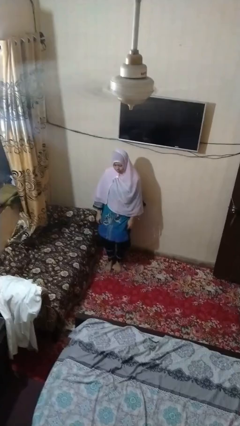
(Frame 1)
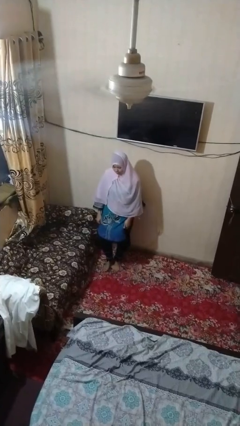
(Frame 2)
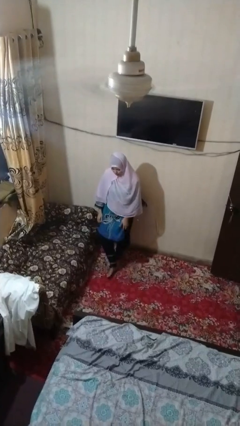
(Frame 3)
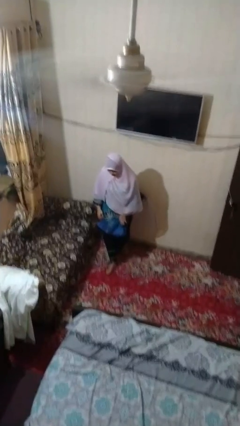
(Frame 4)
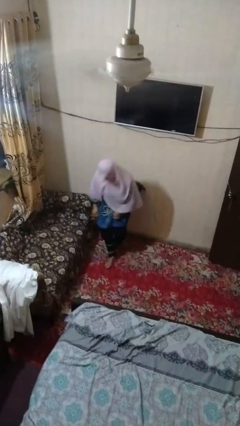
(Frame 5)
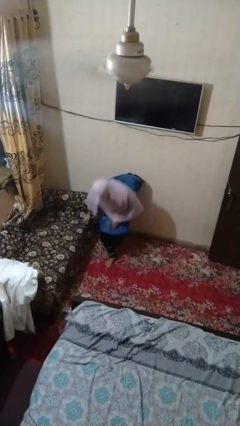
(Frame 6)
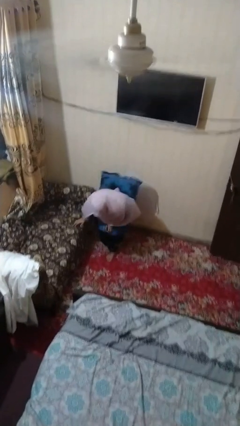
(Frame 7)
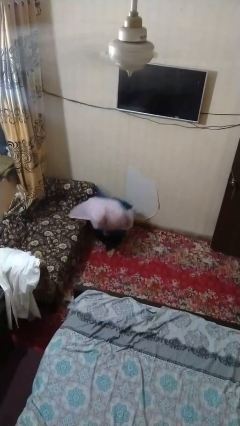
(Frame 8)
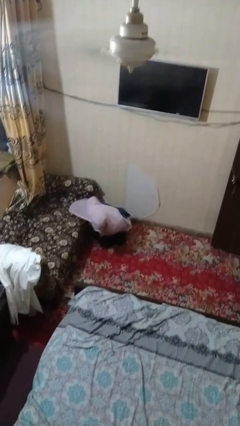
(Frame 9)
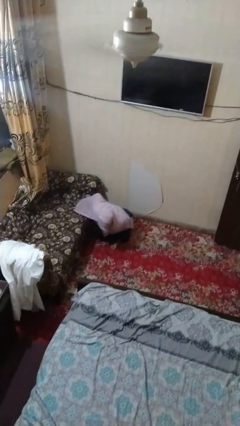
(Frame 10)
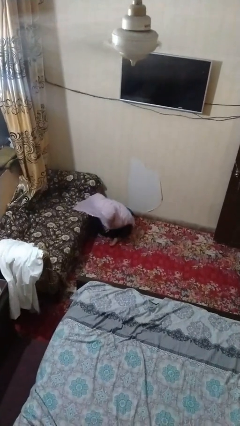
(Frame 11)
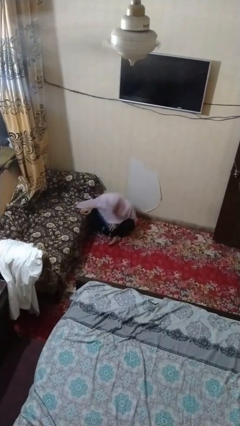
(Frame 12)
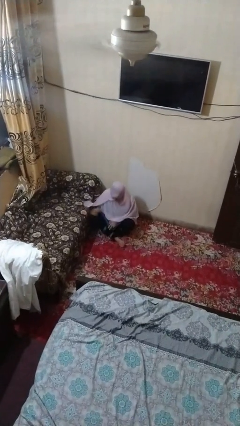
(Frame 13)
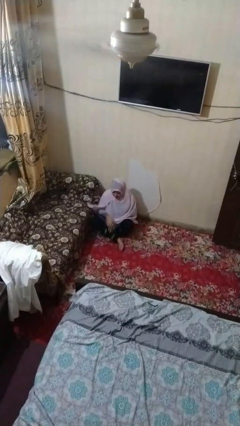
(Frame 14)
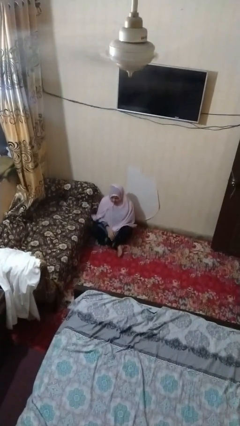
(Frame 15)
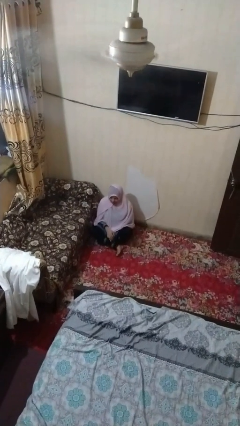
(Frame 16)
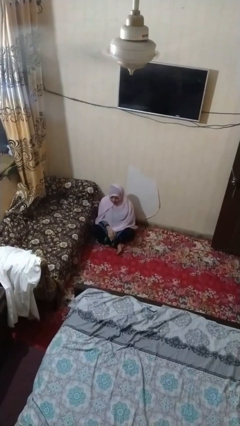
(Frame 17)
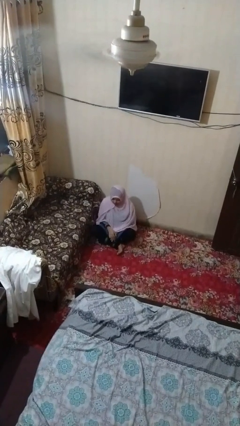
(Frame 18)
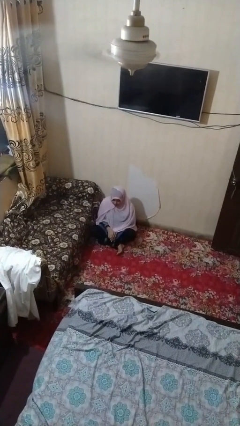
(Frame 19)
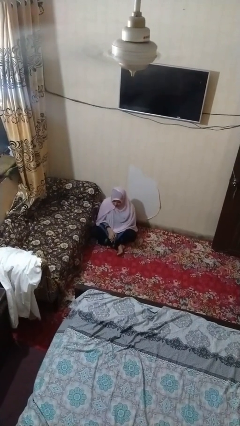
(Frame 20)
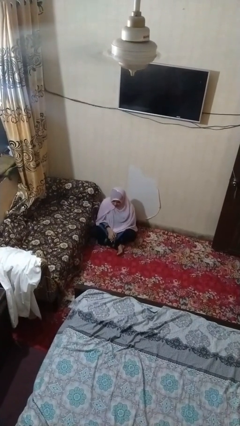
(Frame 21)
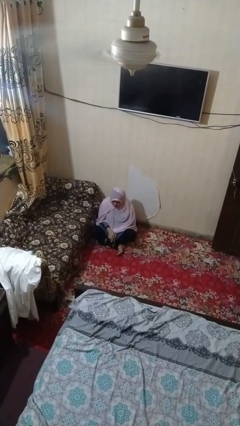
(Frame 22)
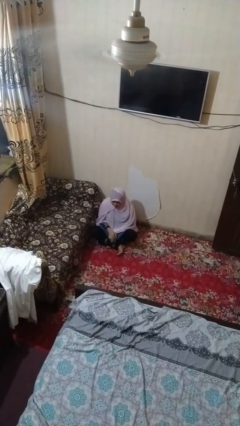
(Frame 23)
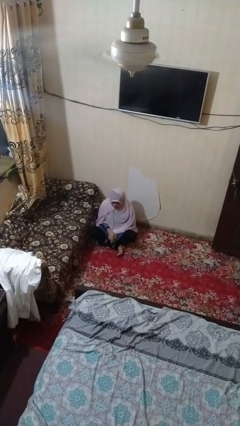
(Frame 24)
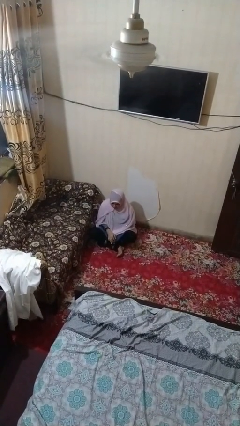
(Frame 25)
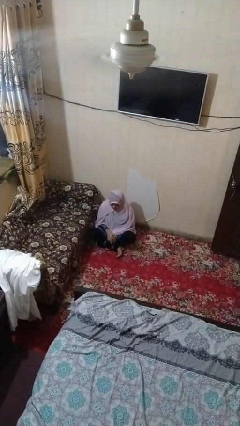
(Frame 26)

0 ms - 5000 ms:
person sits crisscross

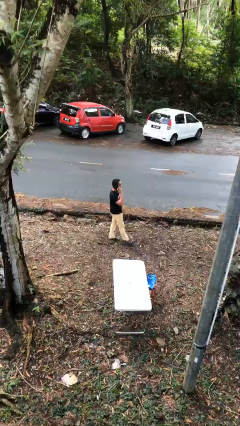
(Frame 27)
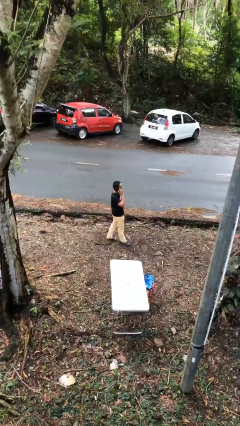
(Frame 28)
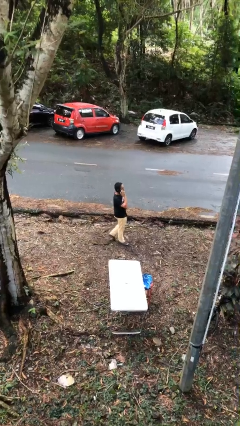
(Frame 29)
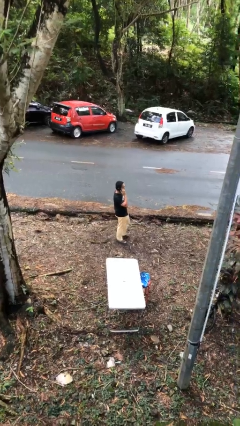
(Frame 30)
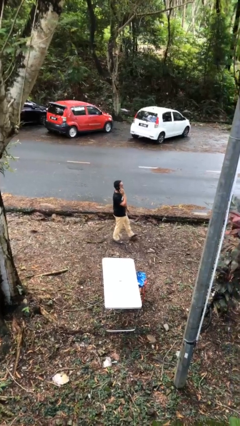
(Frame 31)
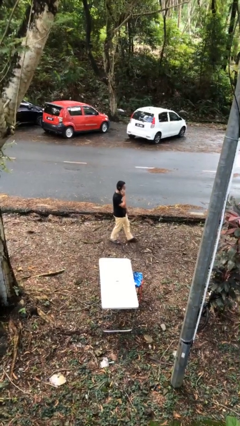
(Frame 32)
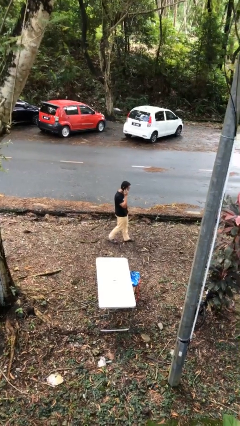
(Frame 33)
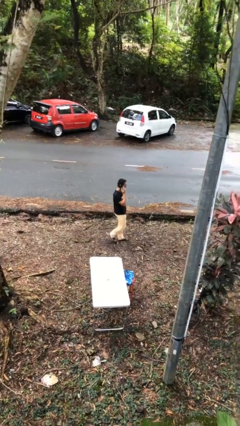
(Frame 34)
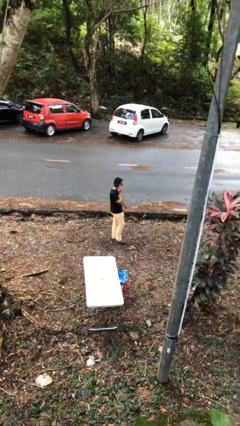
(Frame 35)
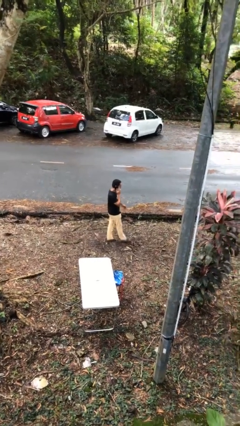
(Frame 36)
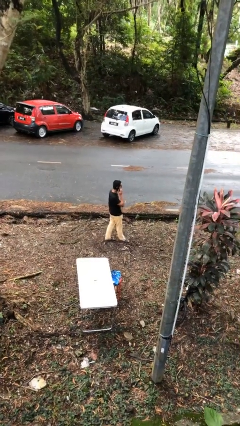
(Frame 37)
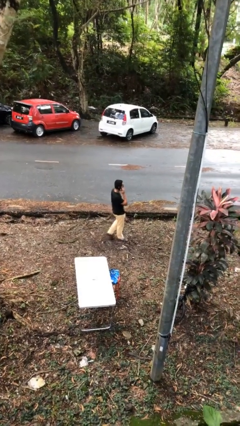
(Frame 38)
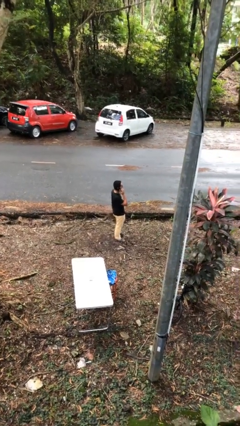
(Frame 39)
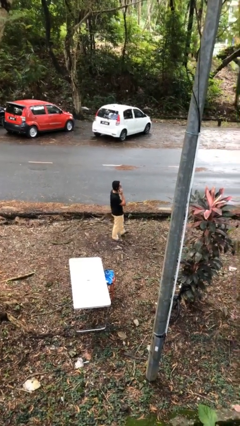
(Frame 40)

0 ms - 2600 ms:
person talks on phone

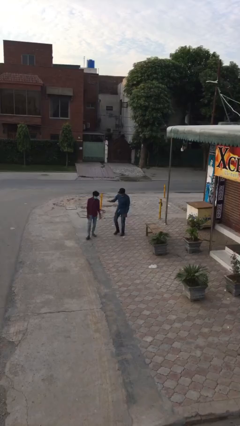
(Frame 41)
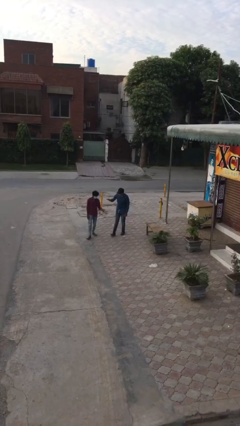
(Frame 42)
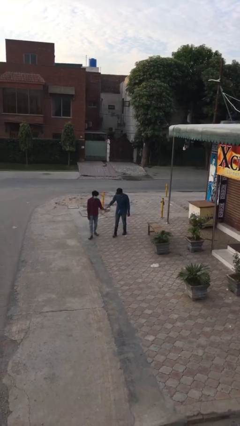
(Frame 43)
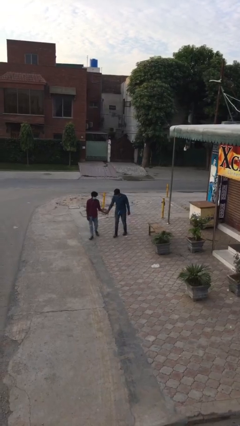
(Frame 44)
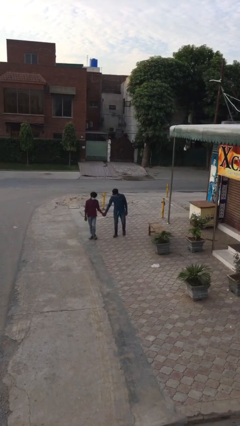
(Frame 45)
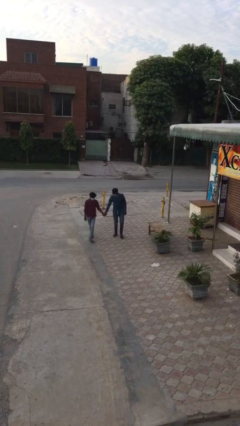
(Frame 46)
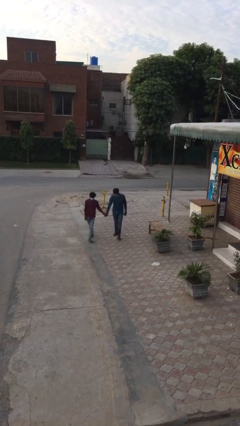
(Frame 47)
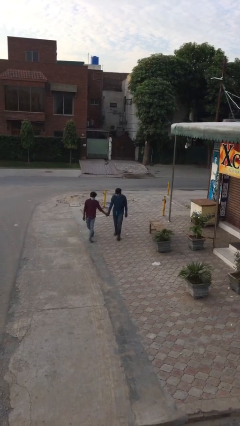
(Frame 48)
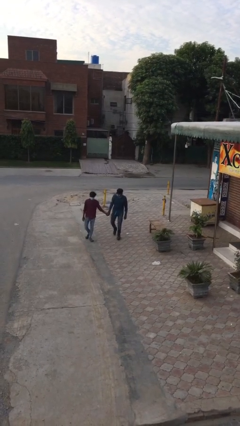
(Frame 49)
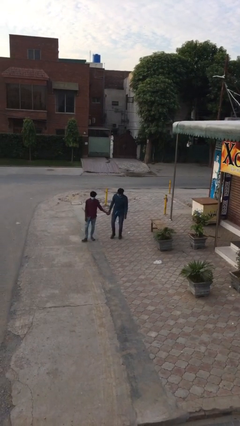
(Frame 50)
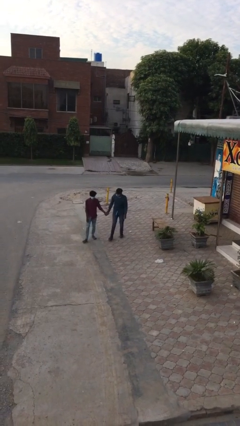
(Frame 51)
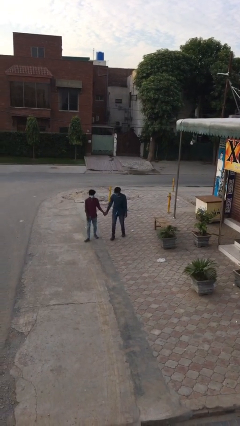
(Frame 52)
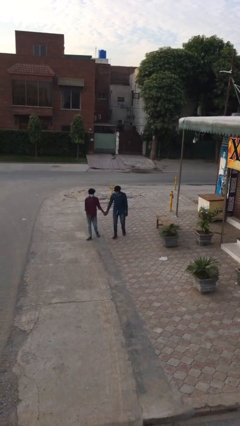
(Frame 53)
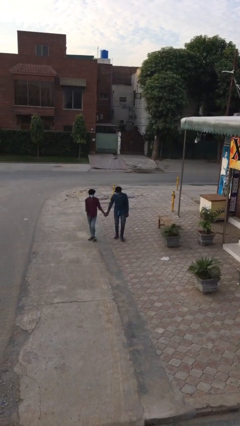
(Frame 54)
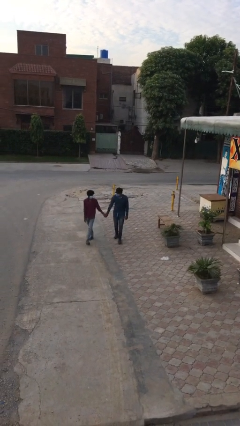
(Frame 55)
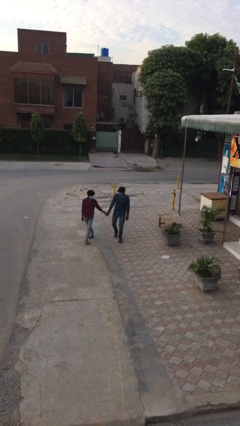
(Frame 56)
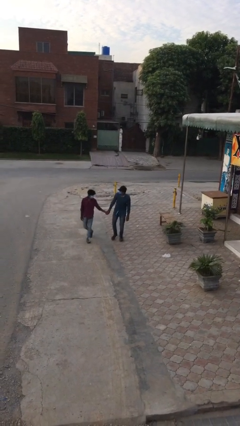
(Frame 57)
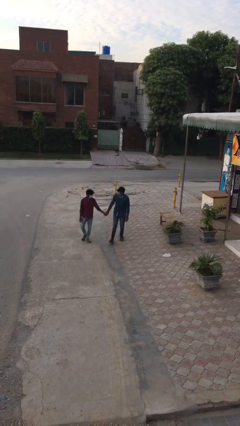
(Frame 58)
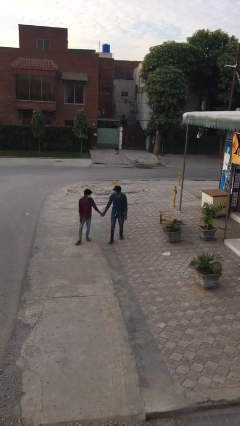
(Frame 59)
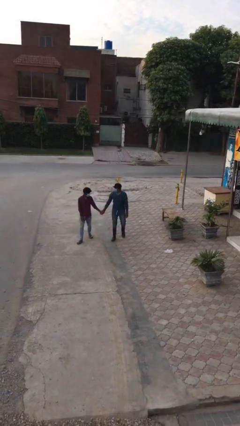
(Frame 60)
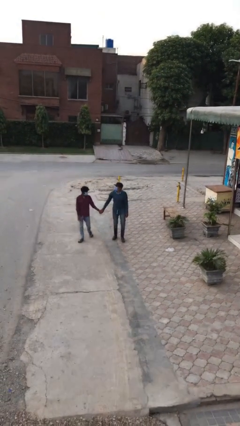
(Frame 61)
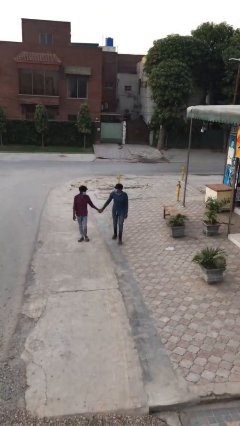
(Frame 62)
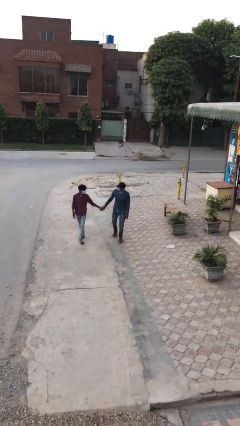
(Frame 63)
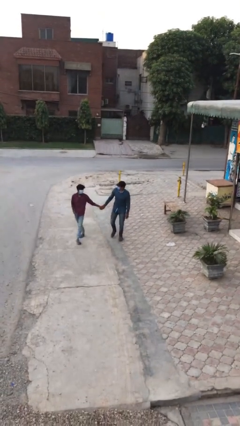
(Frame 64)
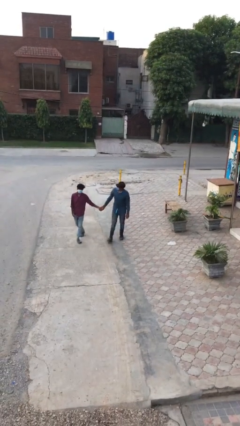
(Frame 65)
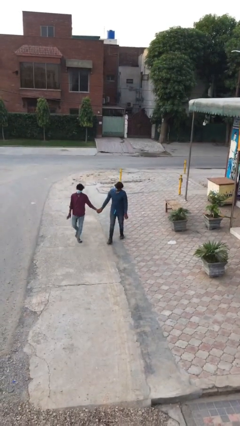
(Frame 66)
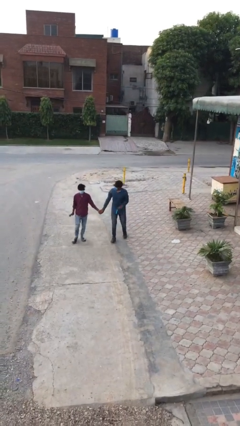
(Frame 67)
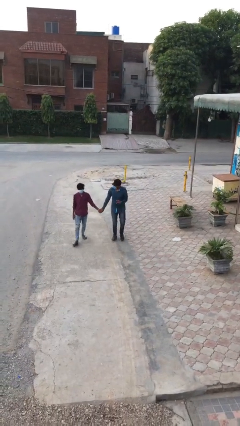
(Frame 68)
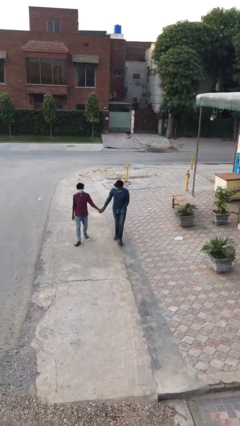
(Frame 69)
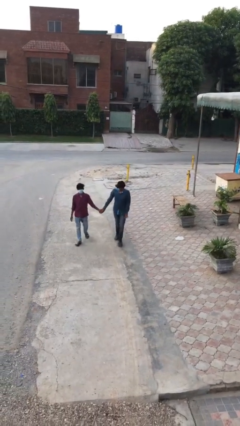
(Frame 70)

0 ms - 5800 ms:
person holds hand

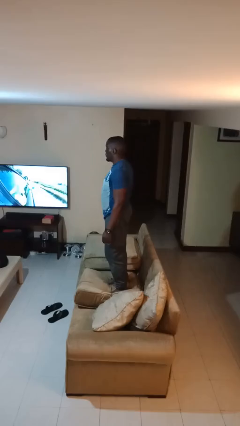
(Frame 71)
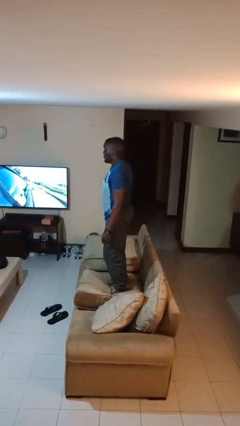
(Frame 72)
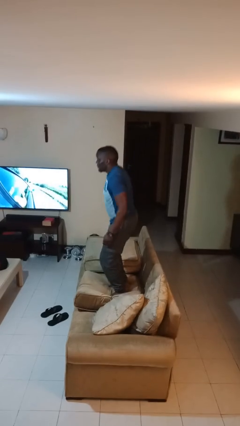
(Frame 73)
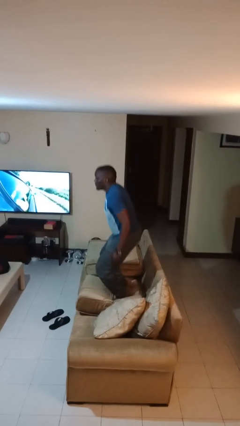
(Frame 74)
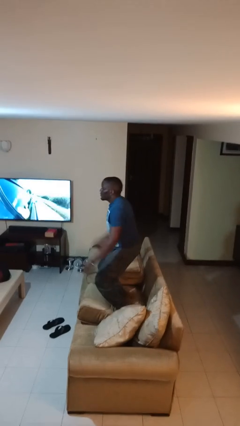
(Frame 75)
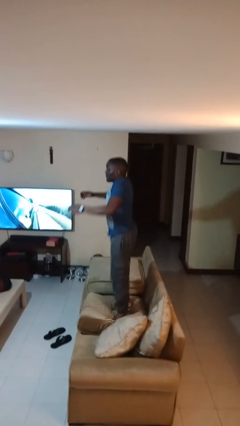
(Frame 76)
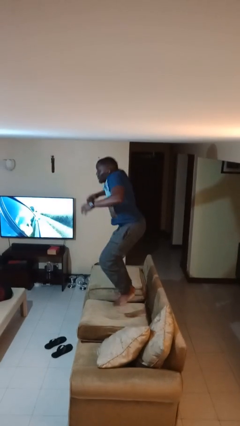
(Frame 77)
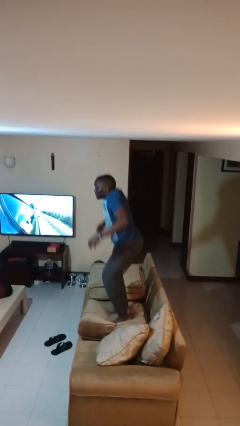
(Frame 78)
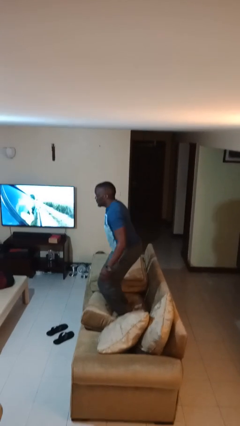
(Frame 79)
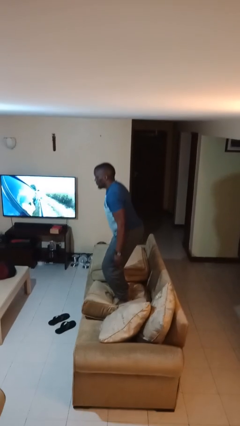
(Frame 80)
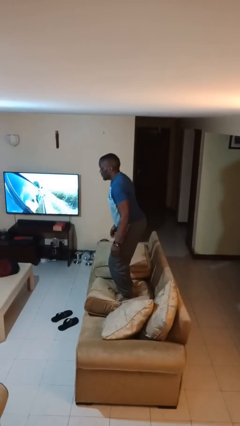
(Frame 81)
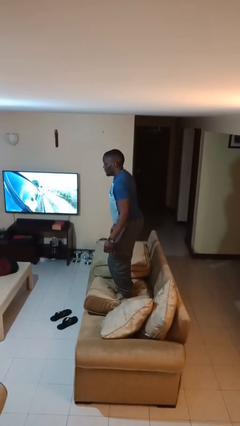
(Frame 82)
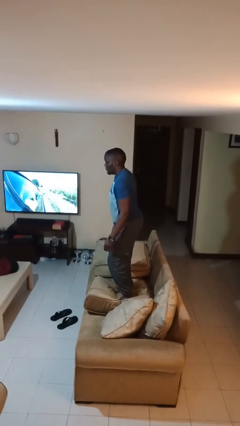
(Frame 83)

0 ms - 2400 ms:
person jumps on couch

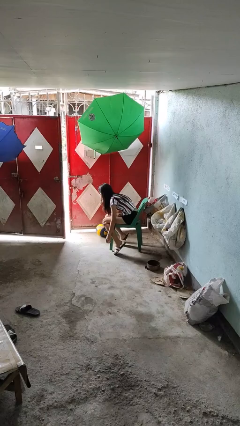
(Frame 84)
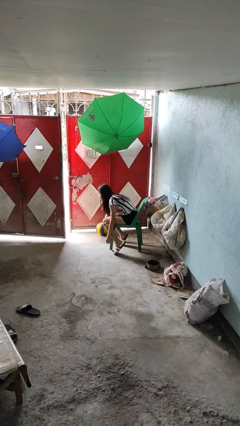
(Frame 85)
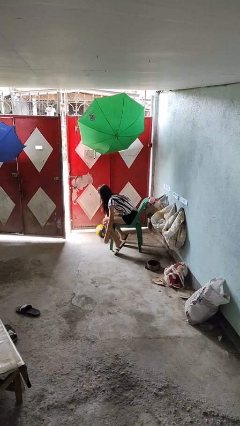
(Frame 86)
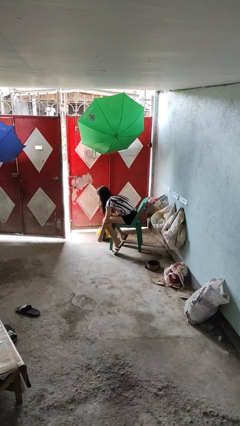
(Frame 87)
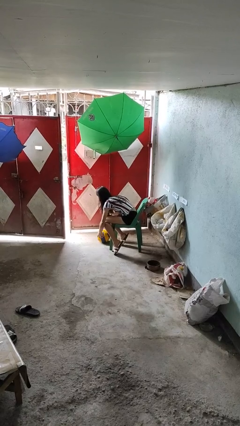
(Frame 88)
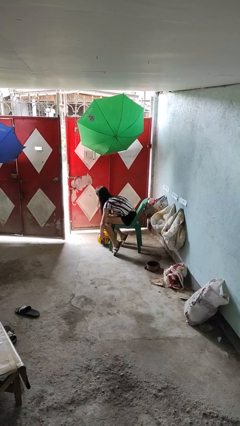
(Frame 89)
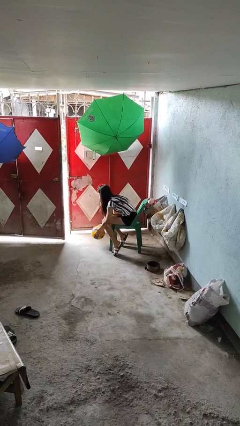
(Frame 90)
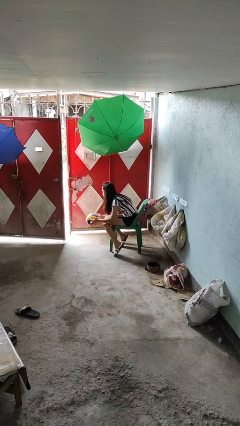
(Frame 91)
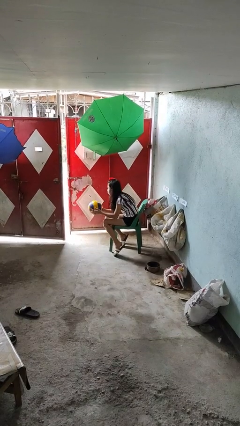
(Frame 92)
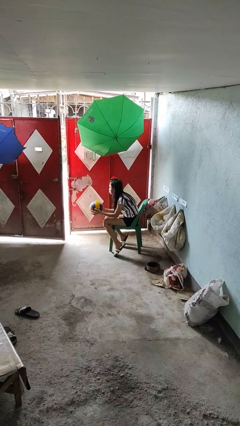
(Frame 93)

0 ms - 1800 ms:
person picks up object from floor
